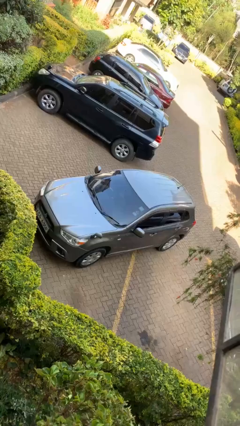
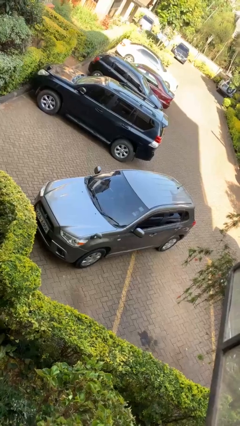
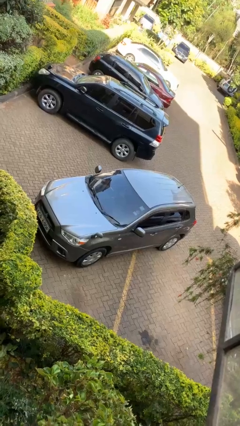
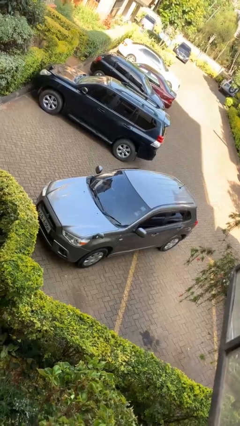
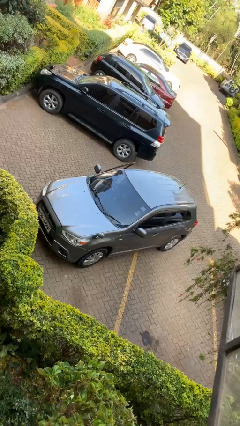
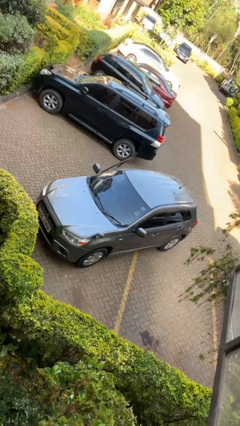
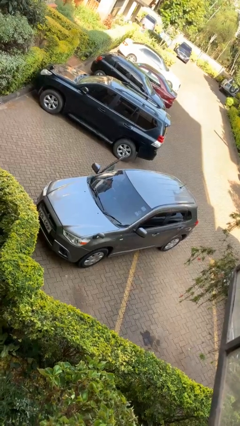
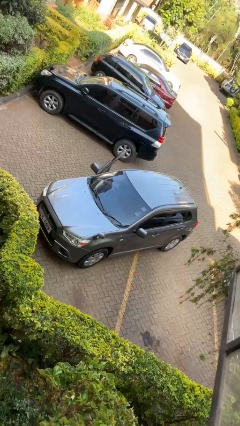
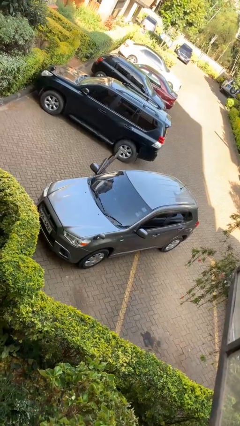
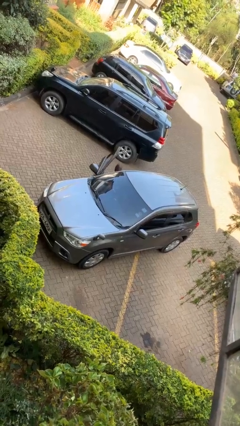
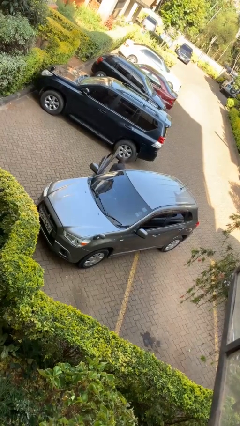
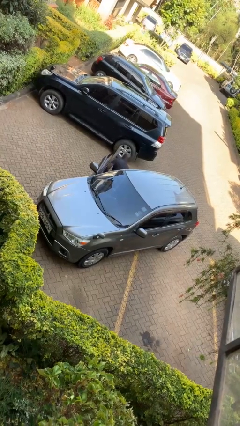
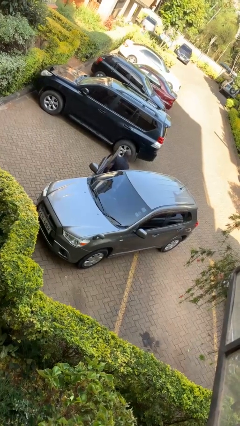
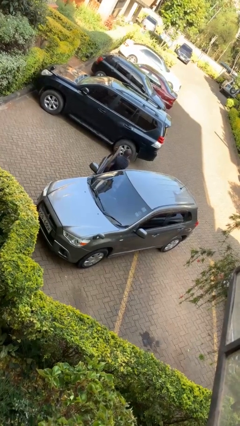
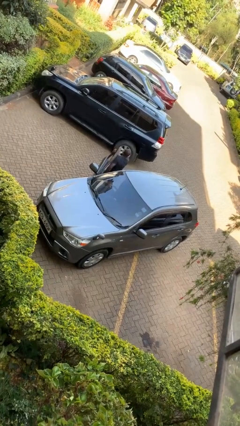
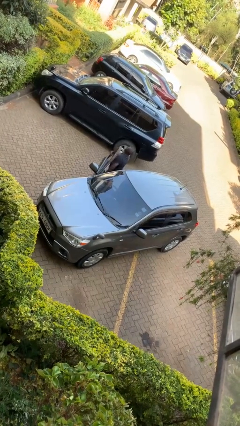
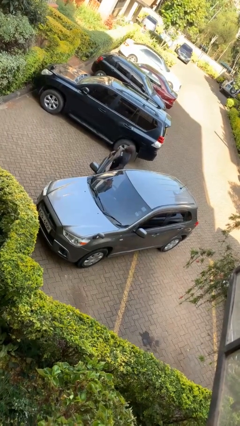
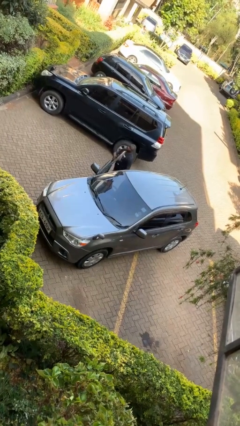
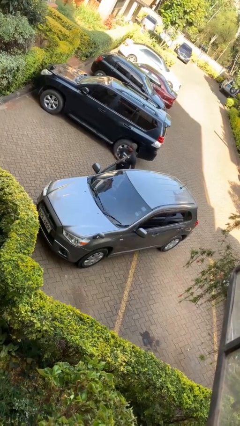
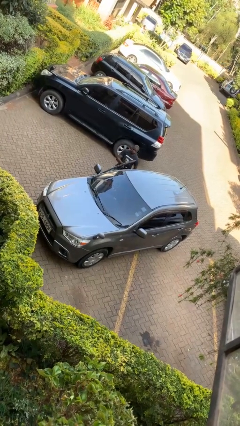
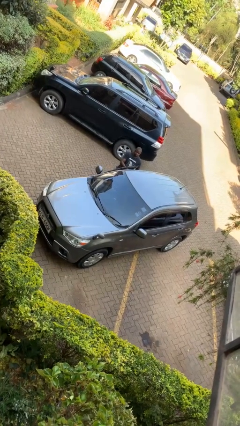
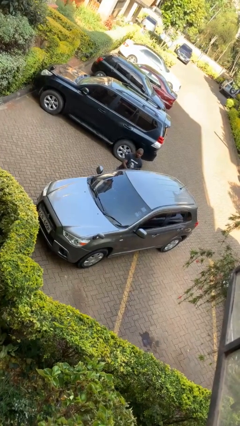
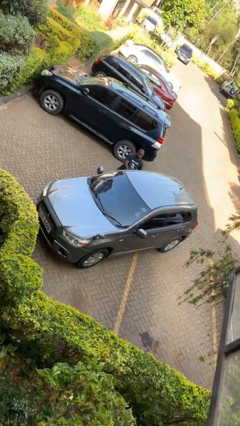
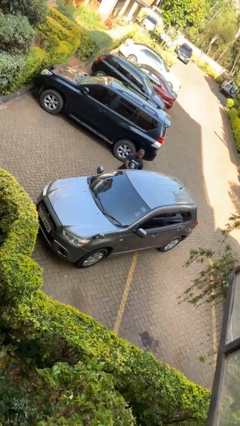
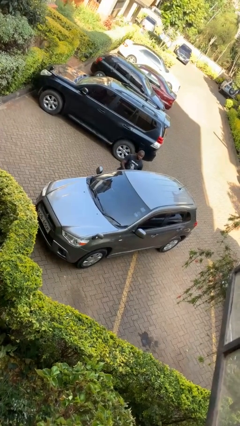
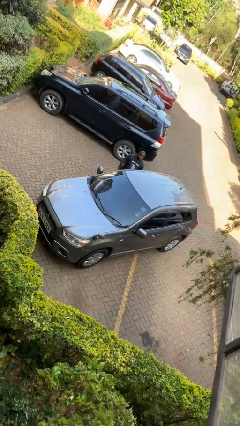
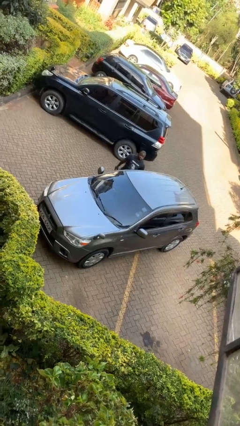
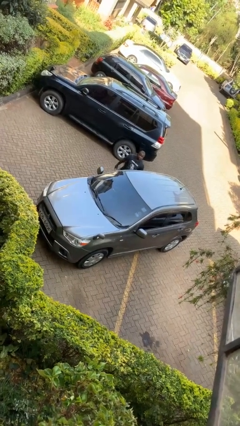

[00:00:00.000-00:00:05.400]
car drops off person

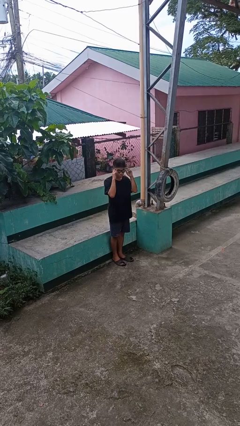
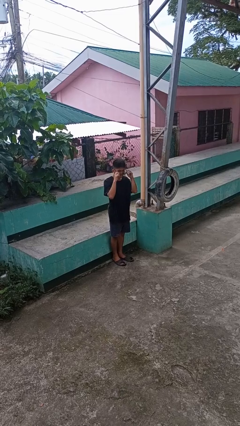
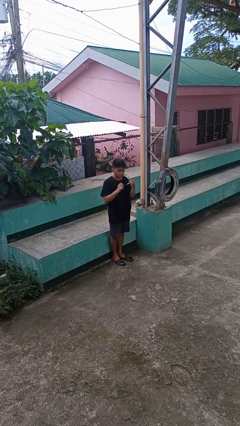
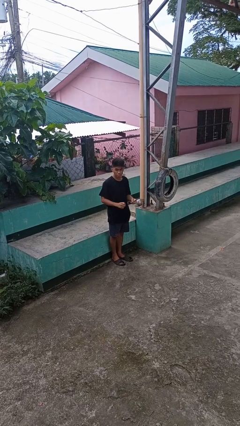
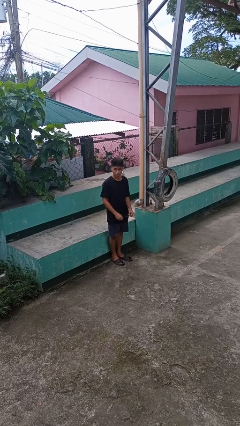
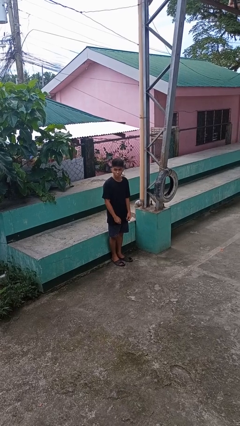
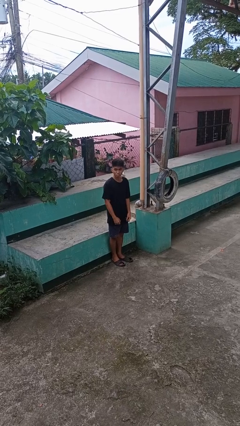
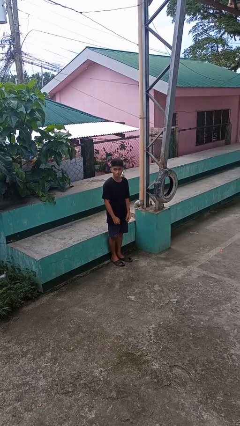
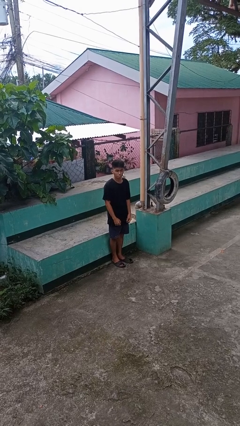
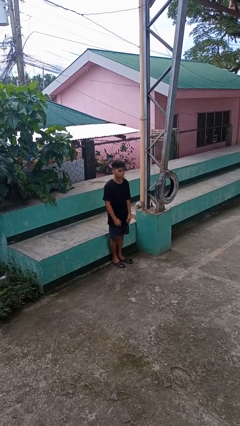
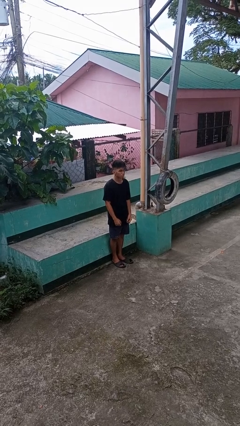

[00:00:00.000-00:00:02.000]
person takes off sunglasses

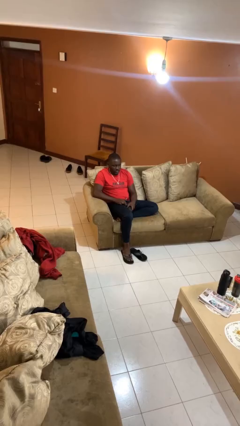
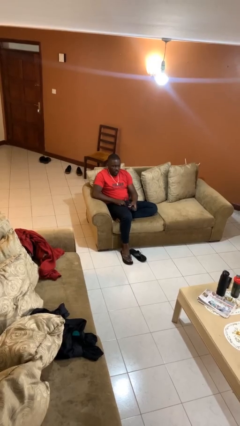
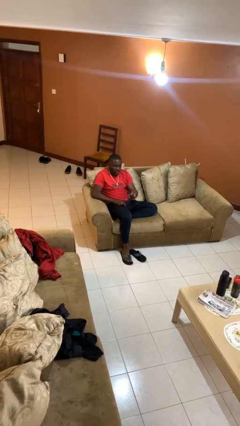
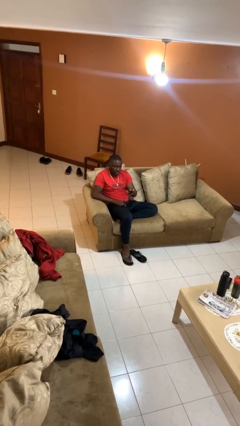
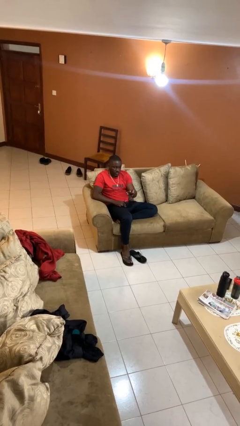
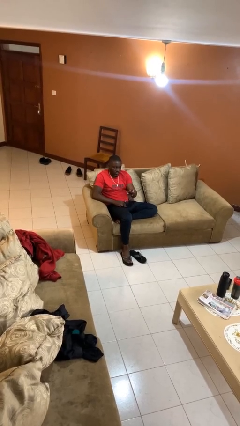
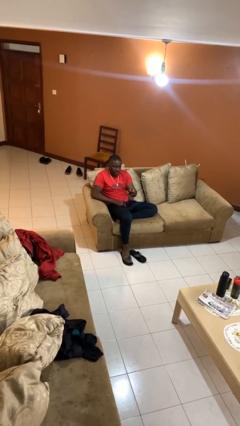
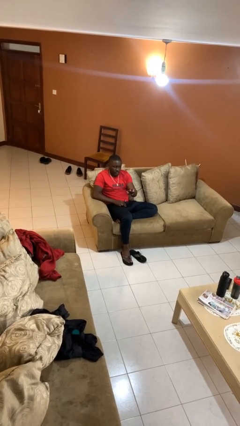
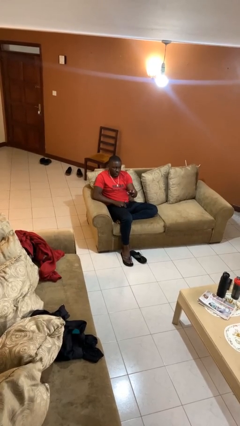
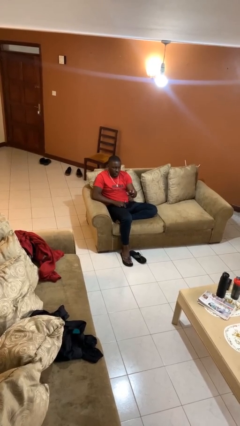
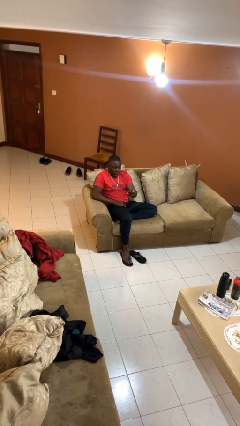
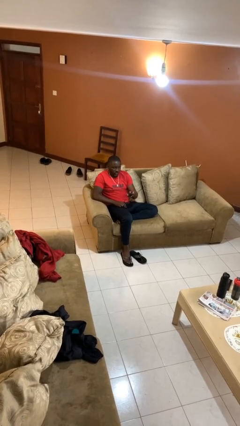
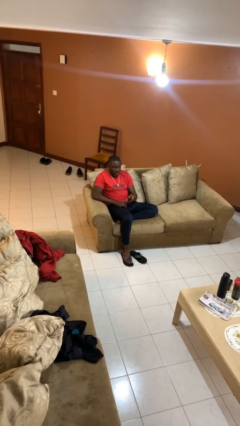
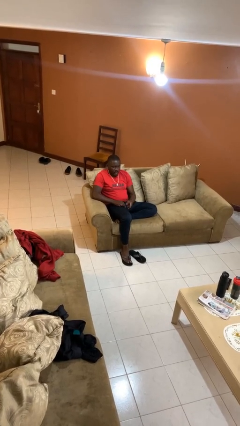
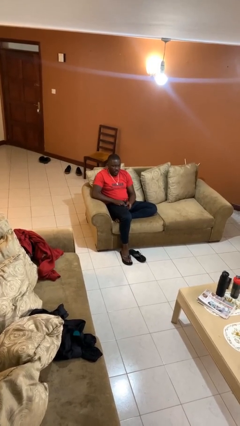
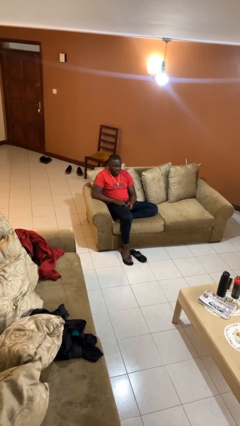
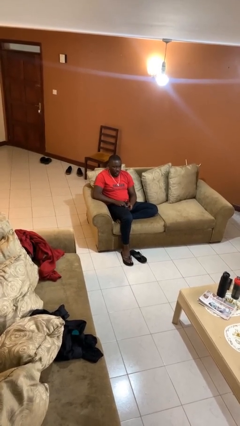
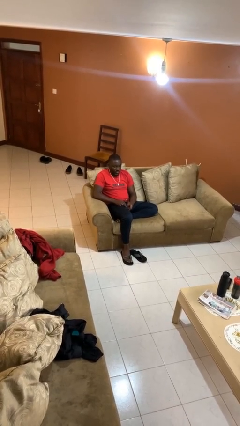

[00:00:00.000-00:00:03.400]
person uses television remote

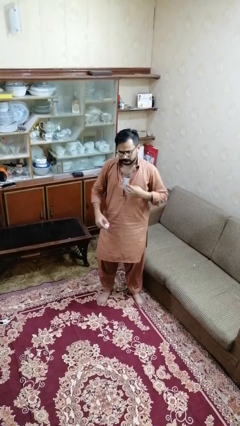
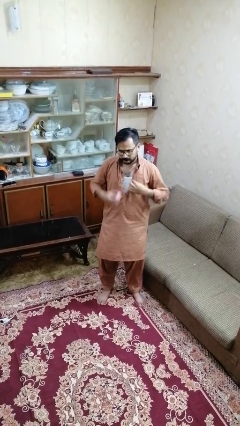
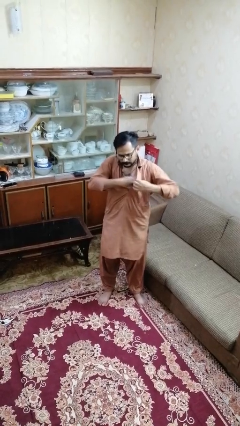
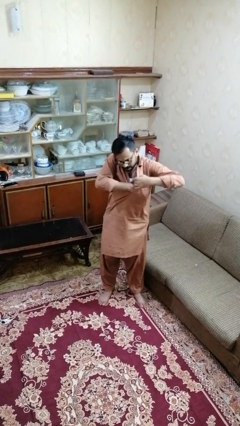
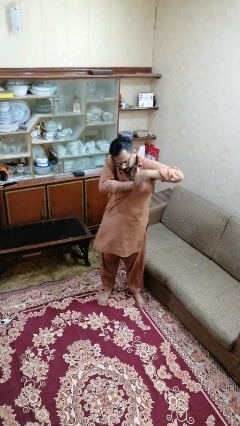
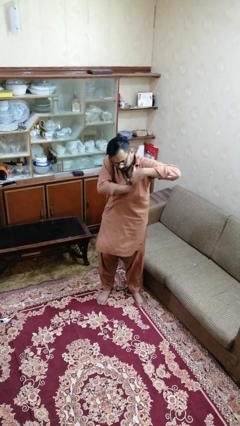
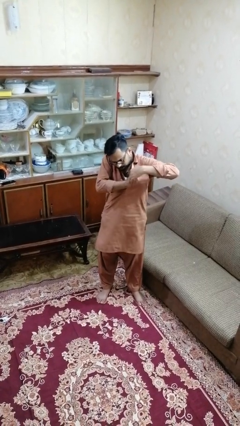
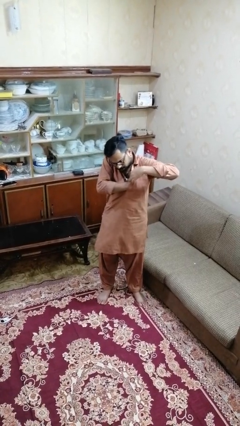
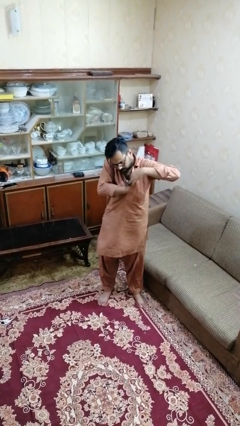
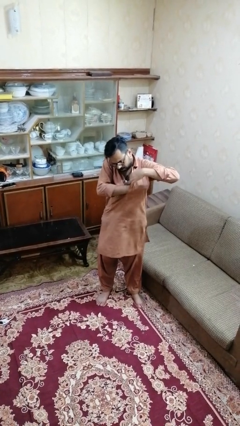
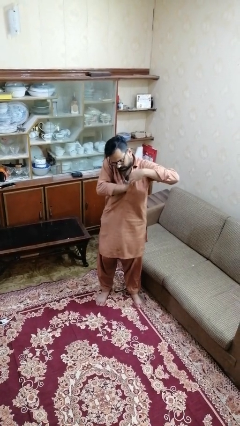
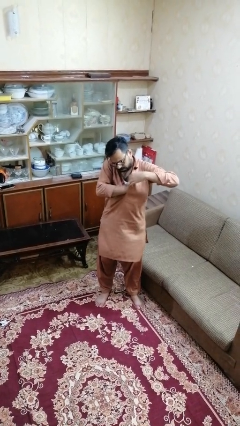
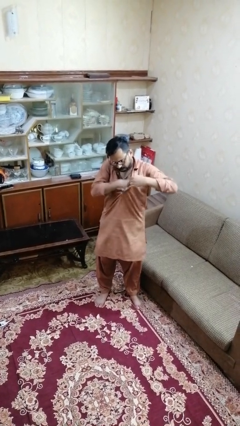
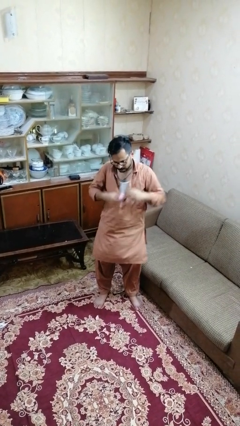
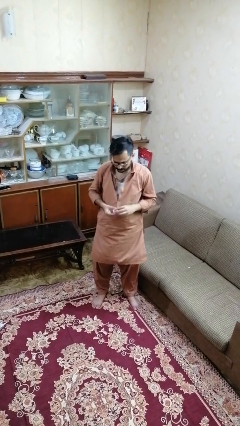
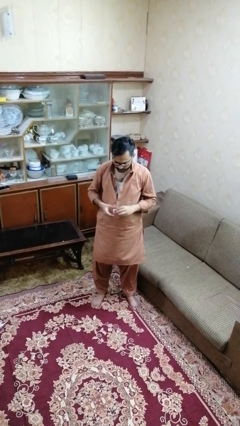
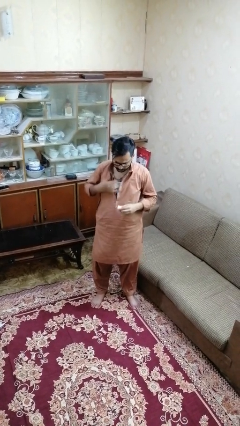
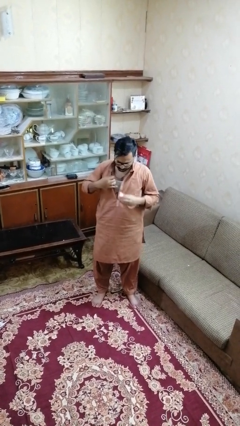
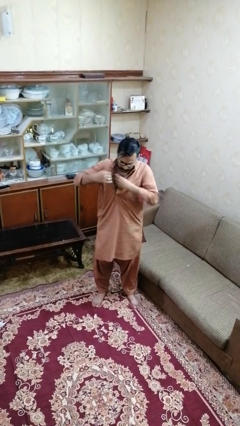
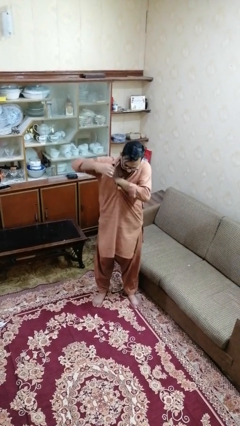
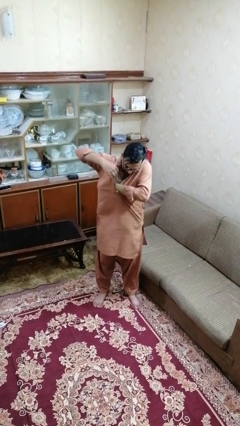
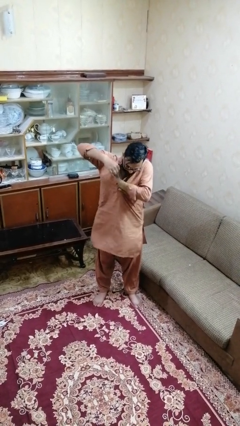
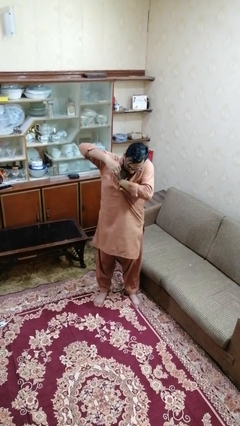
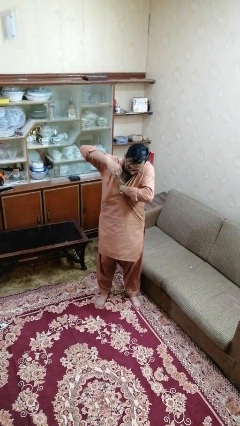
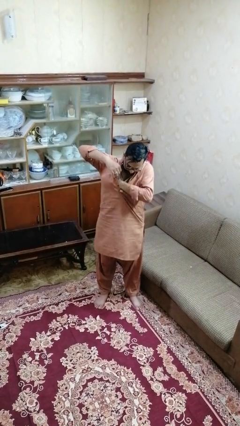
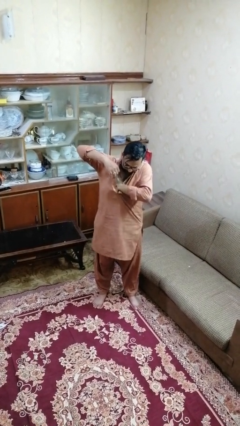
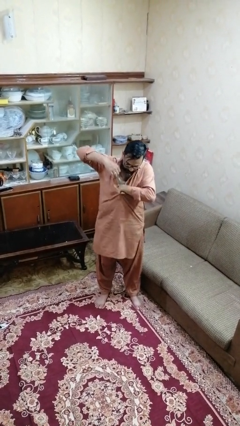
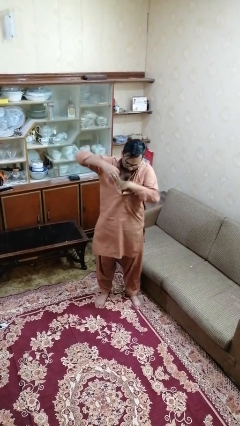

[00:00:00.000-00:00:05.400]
person applies deodorant

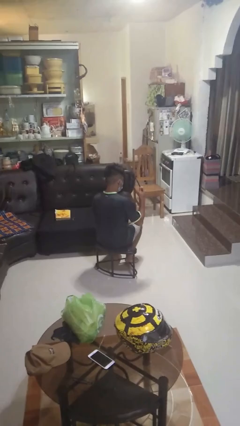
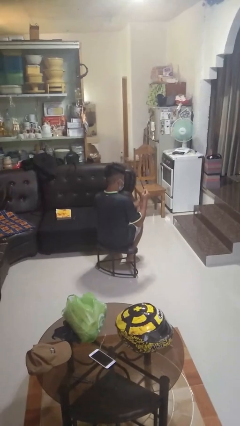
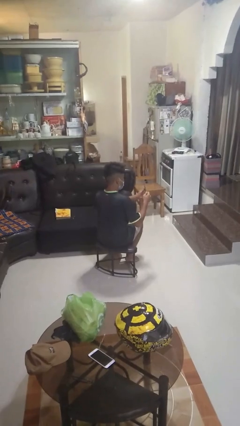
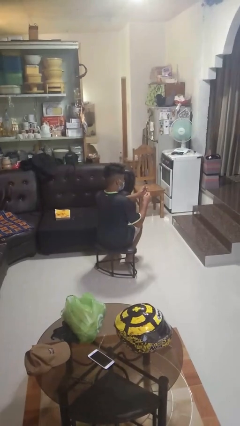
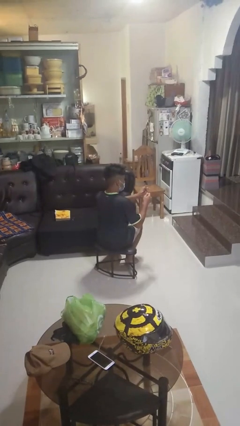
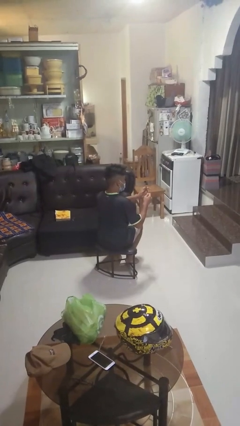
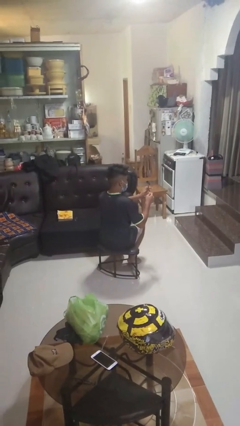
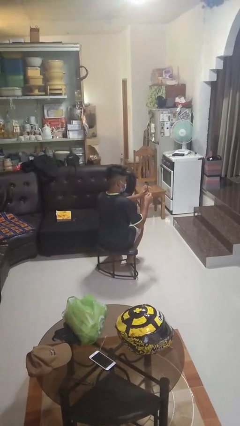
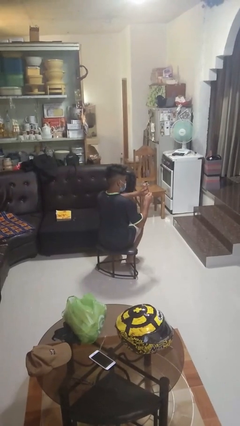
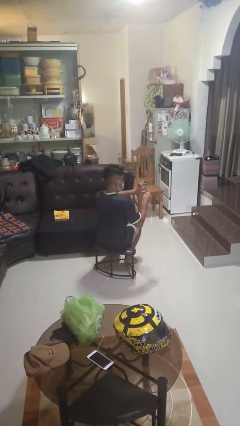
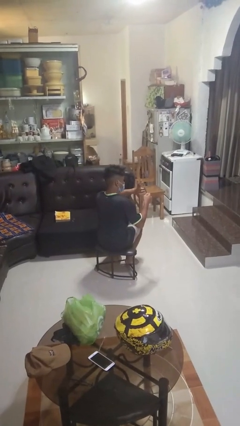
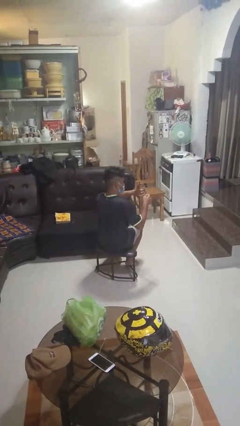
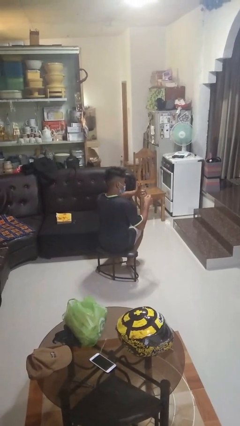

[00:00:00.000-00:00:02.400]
person files fingernails
